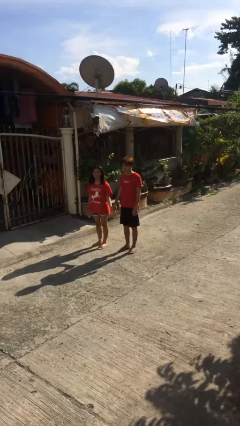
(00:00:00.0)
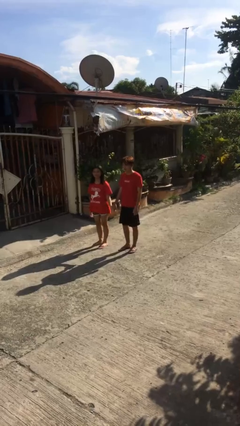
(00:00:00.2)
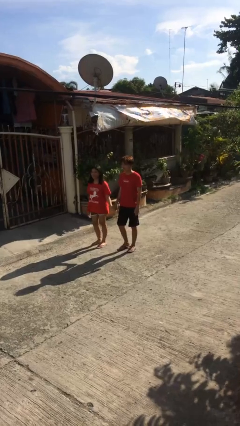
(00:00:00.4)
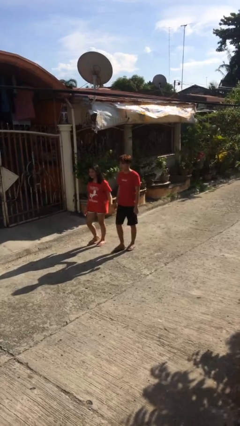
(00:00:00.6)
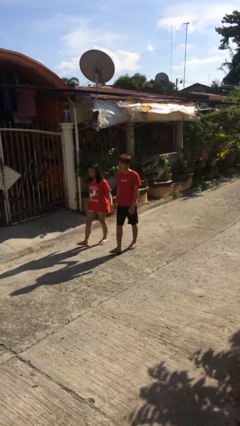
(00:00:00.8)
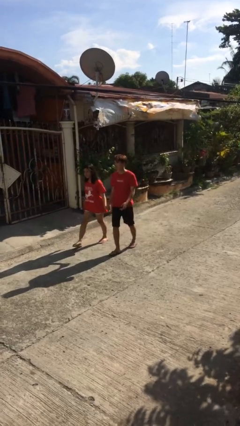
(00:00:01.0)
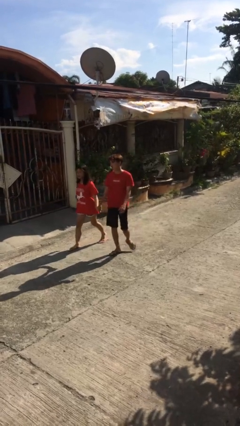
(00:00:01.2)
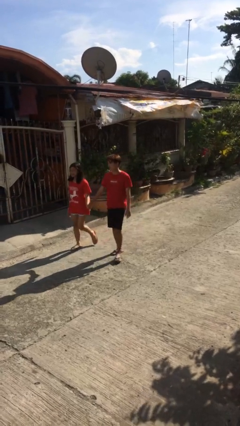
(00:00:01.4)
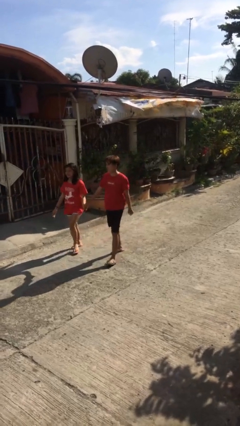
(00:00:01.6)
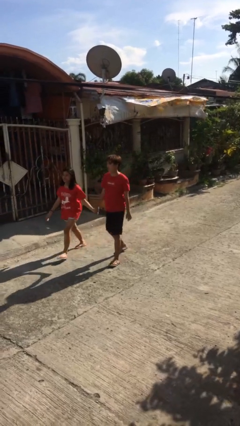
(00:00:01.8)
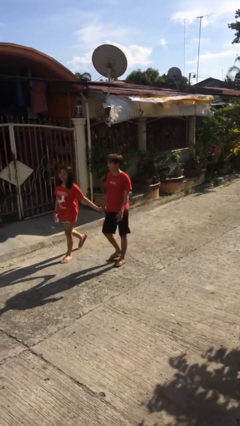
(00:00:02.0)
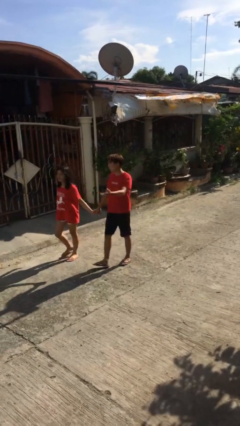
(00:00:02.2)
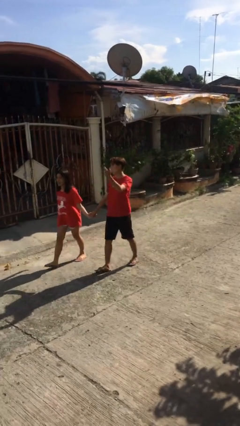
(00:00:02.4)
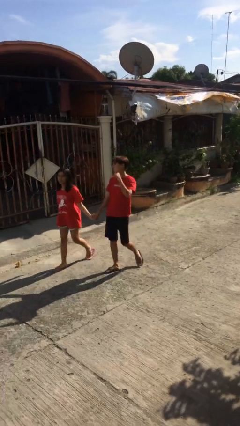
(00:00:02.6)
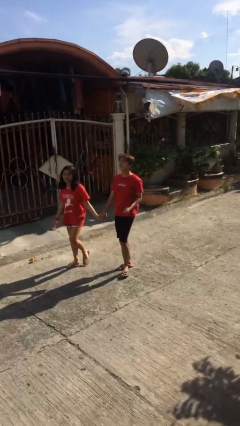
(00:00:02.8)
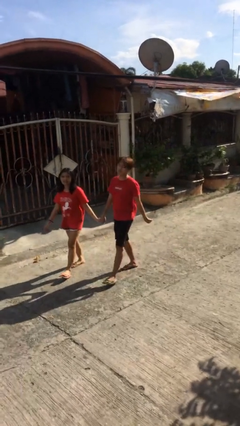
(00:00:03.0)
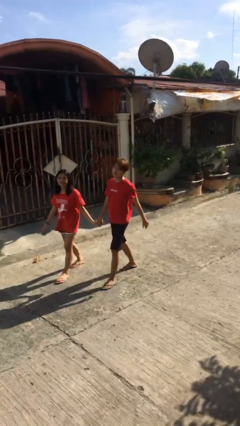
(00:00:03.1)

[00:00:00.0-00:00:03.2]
person holds hand

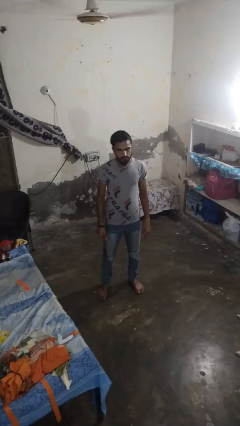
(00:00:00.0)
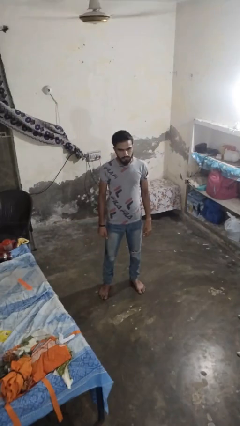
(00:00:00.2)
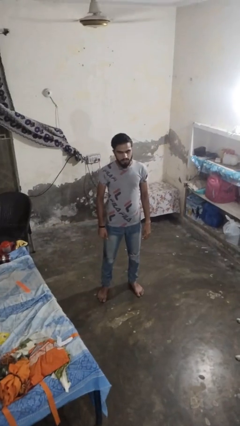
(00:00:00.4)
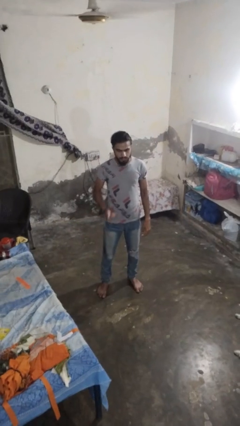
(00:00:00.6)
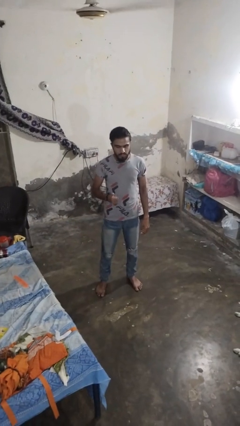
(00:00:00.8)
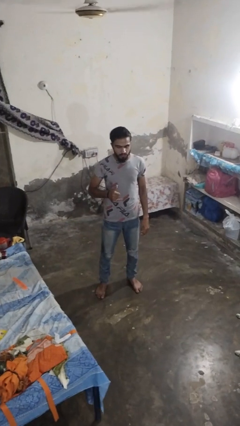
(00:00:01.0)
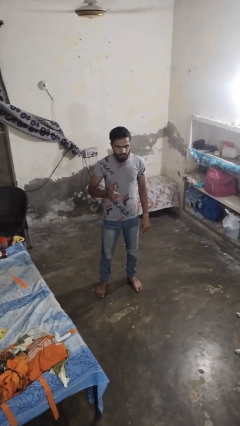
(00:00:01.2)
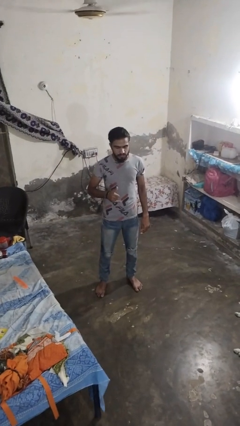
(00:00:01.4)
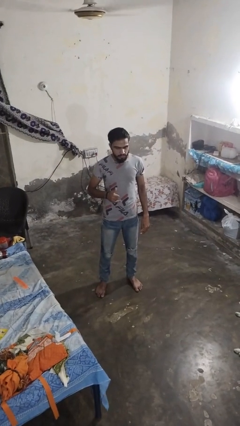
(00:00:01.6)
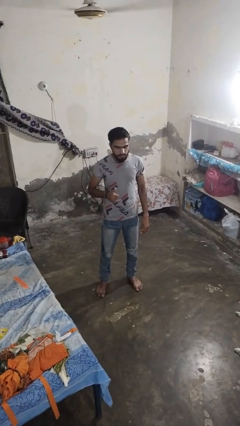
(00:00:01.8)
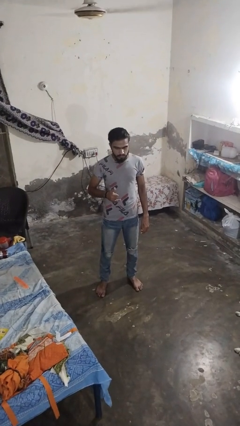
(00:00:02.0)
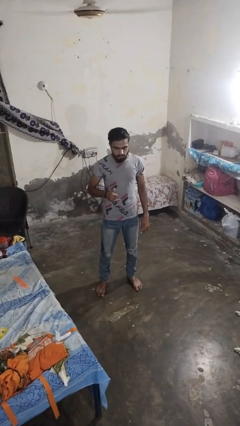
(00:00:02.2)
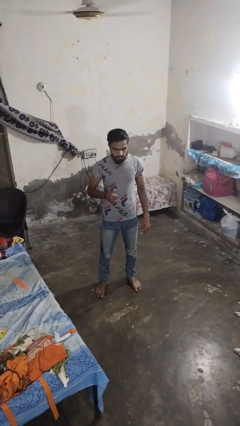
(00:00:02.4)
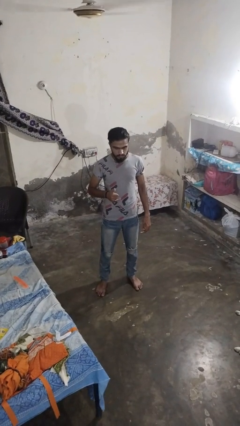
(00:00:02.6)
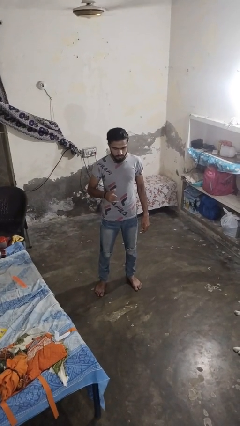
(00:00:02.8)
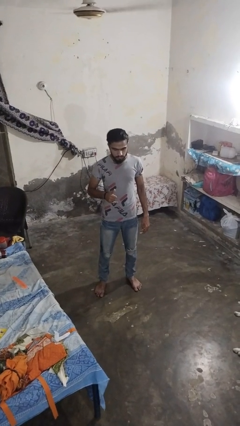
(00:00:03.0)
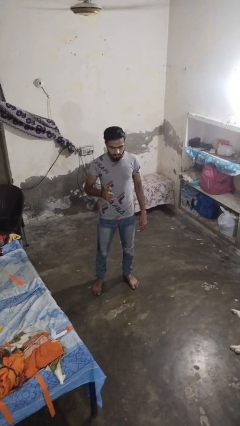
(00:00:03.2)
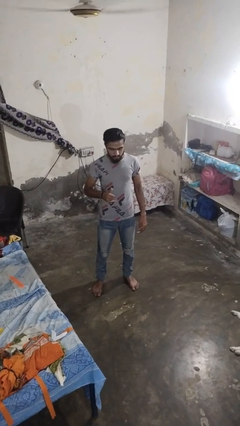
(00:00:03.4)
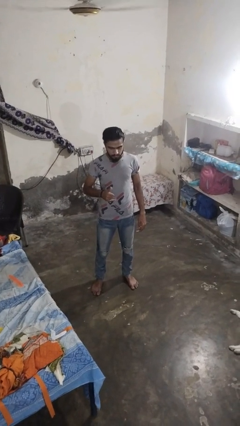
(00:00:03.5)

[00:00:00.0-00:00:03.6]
person gestures hang loose

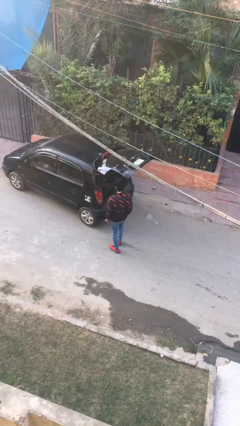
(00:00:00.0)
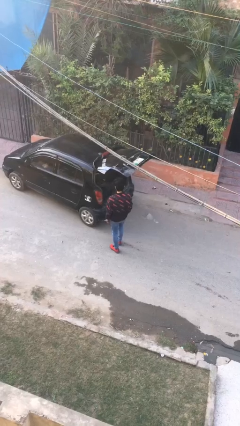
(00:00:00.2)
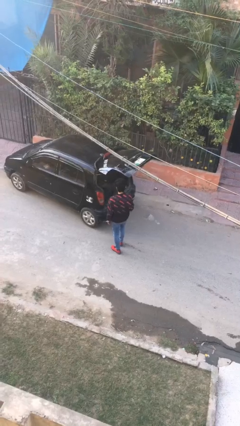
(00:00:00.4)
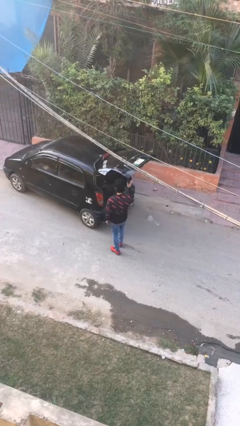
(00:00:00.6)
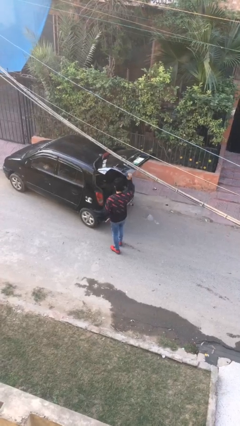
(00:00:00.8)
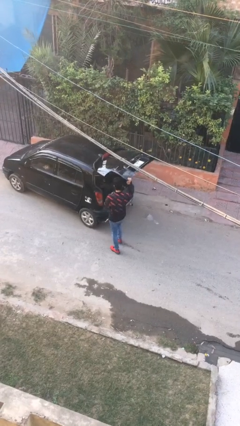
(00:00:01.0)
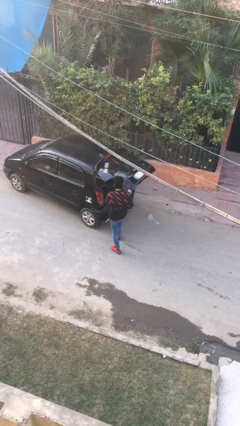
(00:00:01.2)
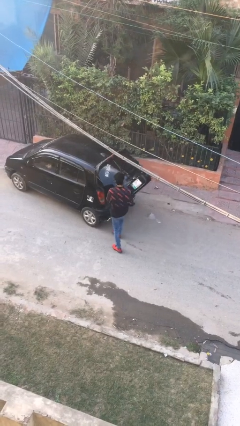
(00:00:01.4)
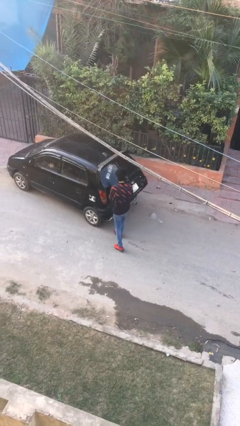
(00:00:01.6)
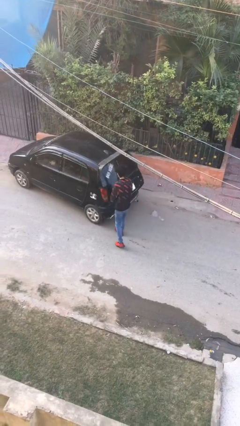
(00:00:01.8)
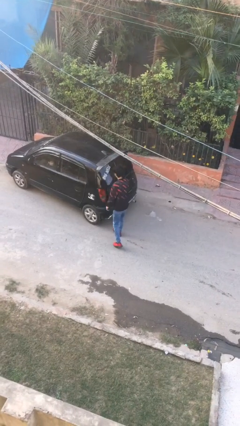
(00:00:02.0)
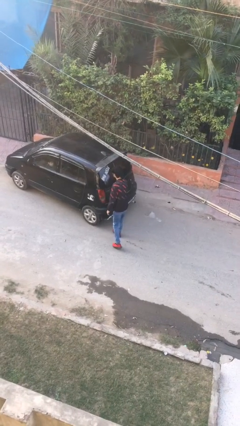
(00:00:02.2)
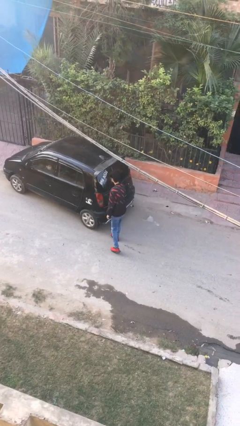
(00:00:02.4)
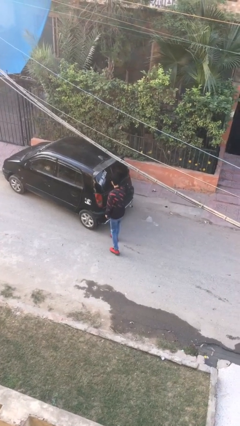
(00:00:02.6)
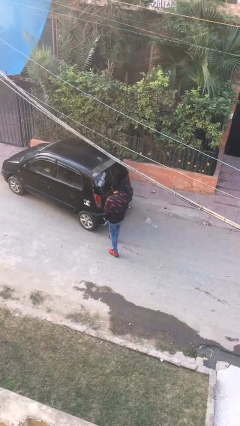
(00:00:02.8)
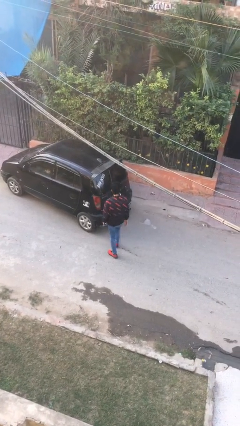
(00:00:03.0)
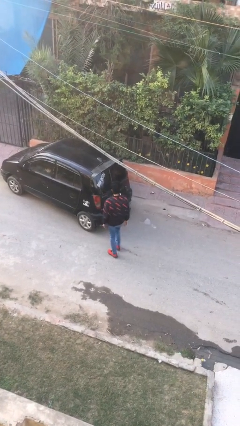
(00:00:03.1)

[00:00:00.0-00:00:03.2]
person closes car trunk

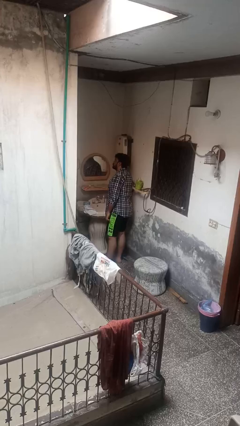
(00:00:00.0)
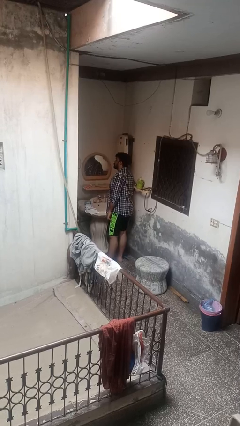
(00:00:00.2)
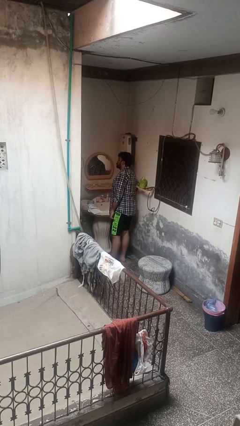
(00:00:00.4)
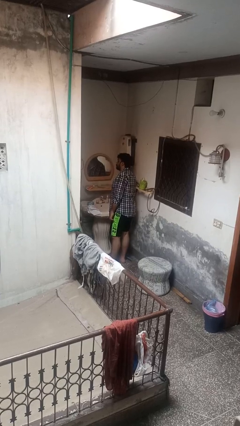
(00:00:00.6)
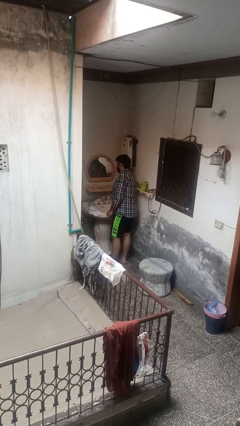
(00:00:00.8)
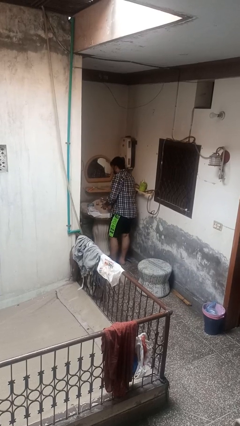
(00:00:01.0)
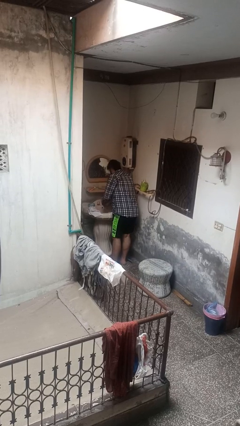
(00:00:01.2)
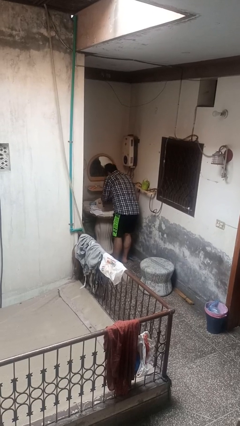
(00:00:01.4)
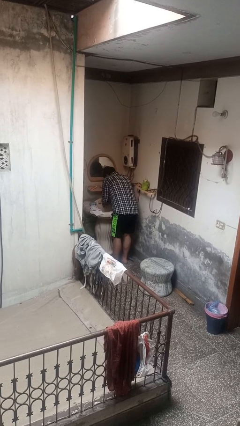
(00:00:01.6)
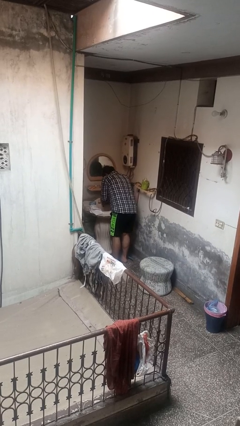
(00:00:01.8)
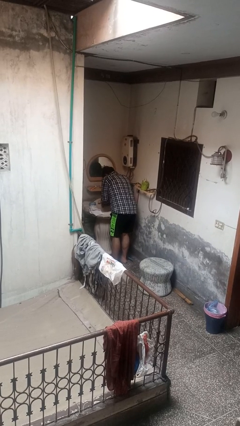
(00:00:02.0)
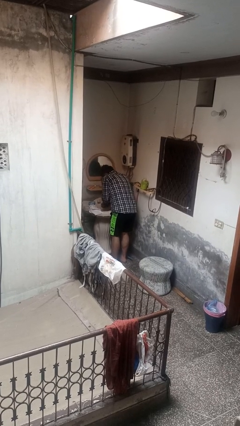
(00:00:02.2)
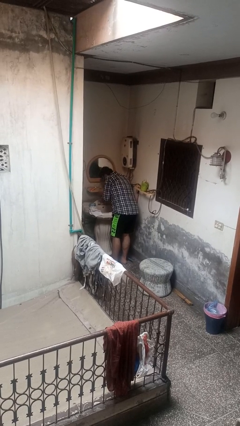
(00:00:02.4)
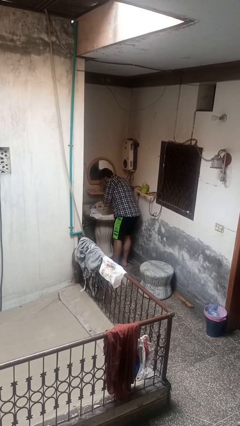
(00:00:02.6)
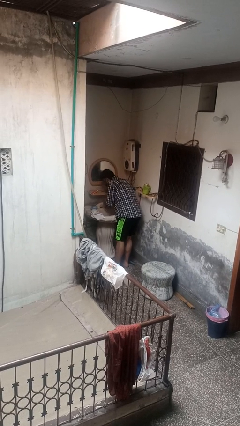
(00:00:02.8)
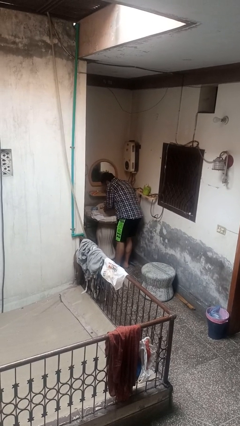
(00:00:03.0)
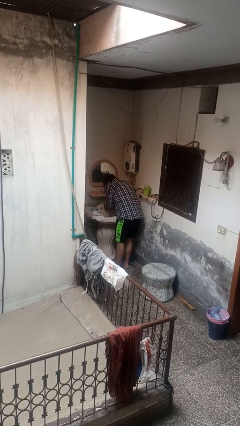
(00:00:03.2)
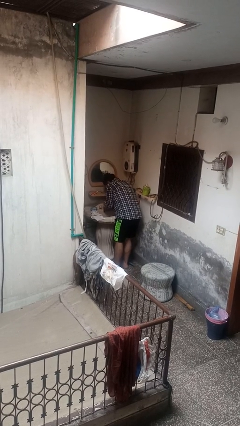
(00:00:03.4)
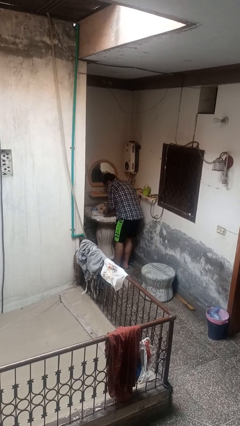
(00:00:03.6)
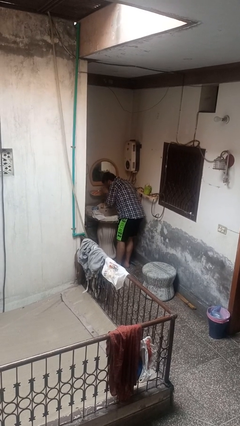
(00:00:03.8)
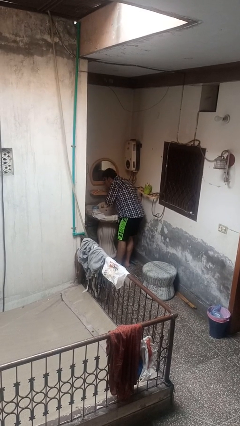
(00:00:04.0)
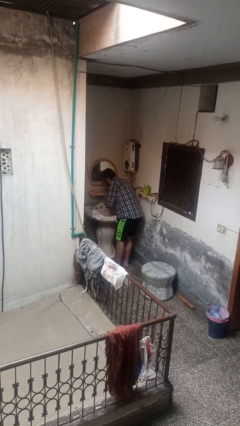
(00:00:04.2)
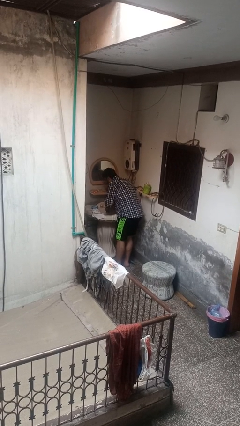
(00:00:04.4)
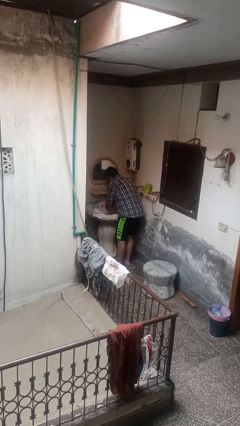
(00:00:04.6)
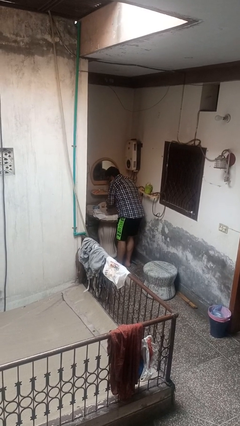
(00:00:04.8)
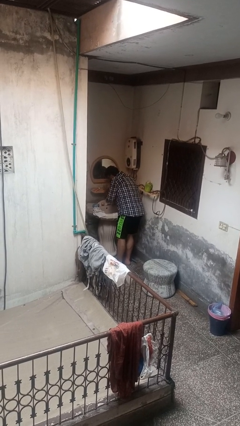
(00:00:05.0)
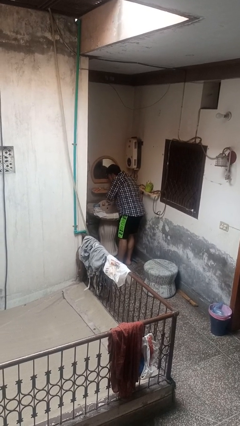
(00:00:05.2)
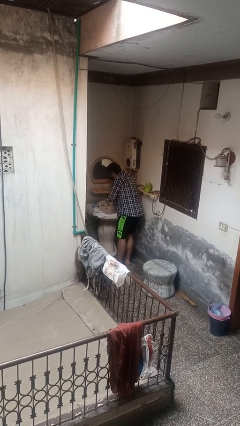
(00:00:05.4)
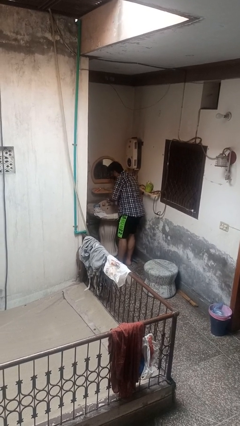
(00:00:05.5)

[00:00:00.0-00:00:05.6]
person washes face

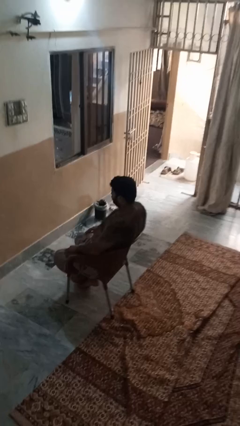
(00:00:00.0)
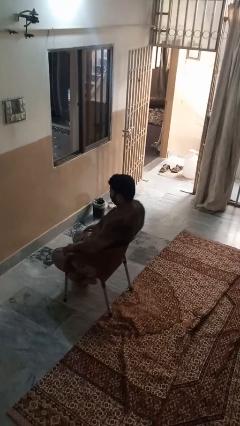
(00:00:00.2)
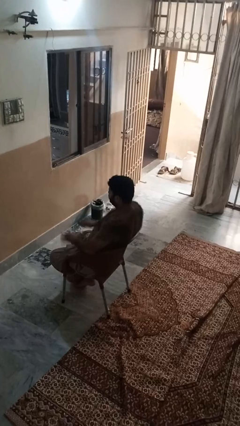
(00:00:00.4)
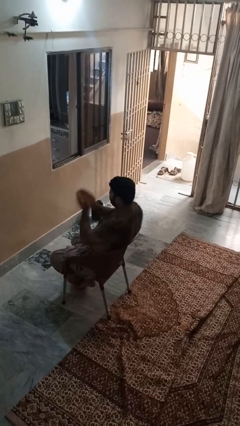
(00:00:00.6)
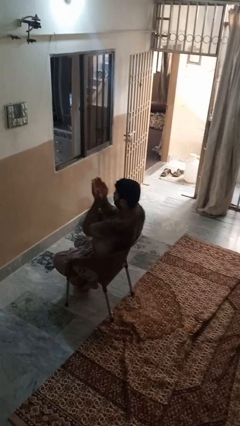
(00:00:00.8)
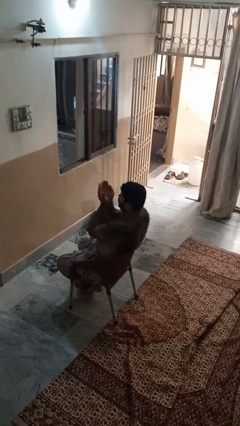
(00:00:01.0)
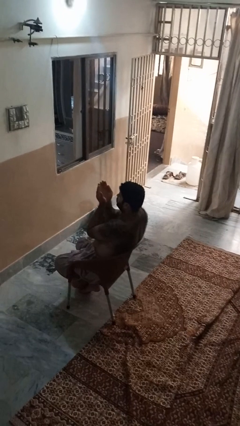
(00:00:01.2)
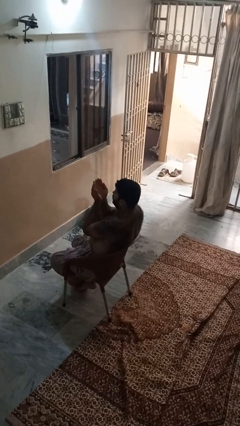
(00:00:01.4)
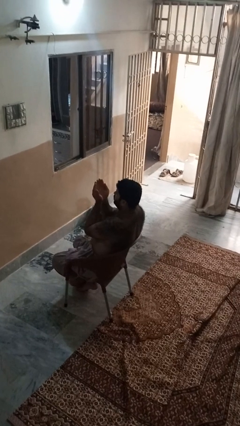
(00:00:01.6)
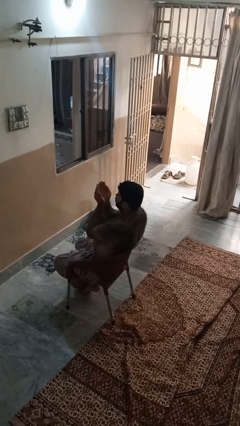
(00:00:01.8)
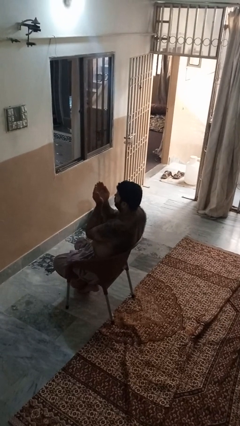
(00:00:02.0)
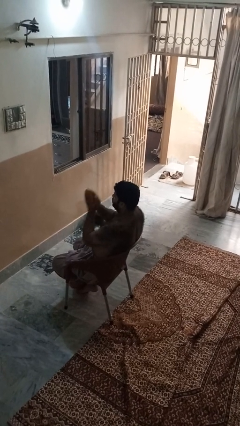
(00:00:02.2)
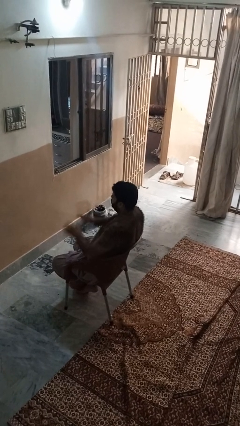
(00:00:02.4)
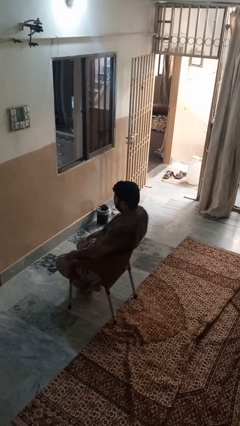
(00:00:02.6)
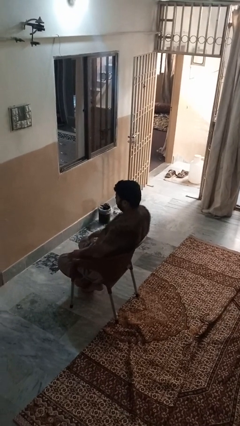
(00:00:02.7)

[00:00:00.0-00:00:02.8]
person prays
